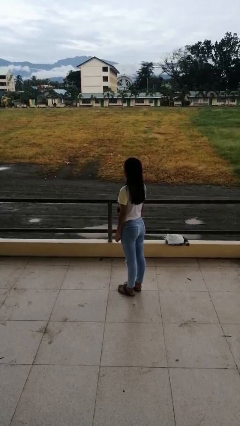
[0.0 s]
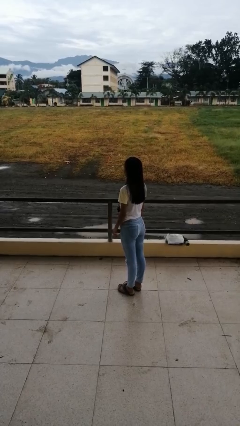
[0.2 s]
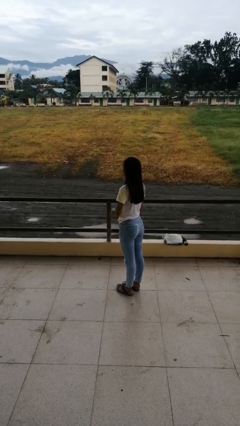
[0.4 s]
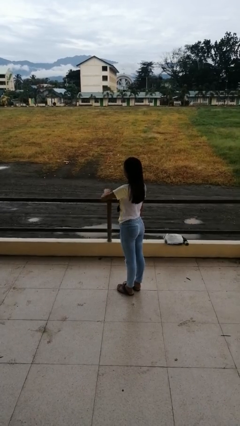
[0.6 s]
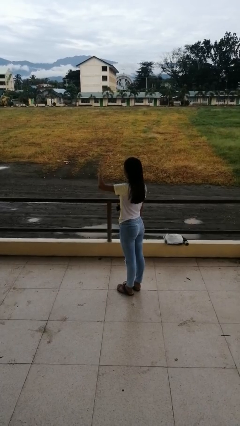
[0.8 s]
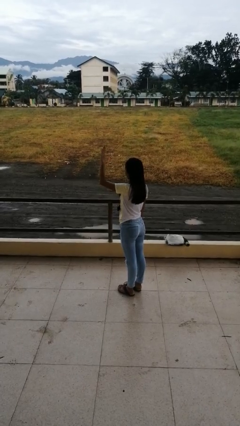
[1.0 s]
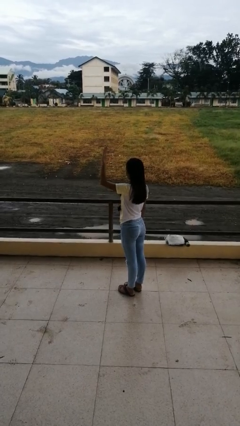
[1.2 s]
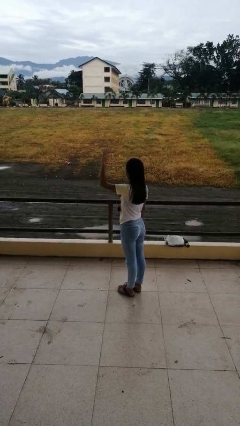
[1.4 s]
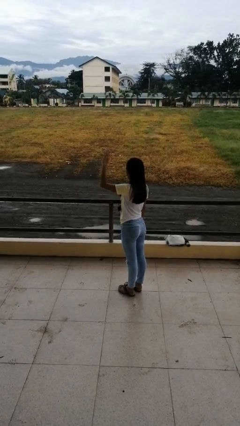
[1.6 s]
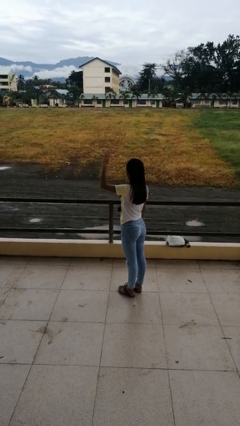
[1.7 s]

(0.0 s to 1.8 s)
person gestures swipe up

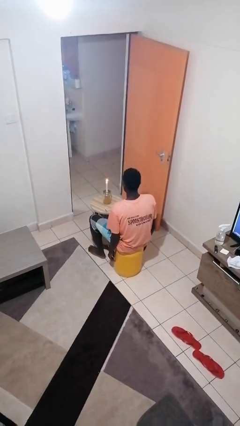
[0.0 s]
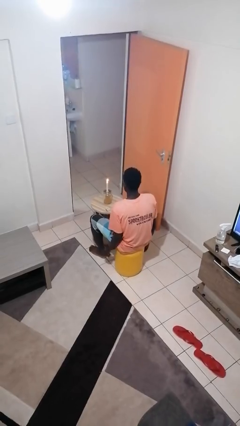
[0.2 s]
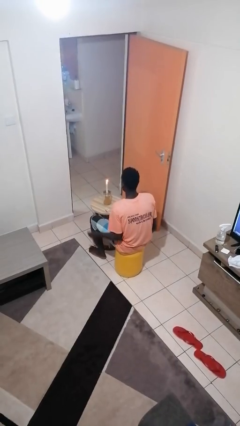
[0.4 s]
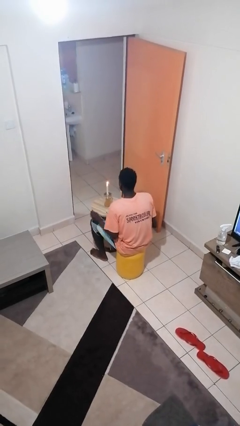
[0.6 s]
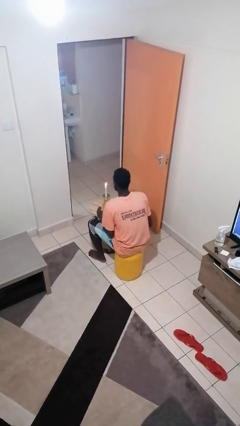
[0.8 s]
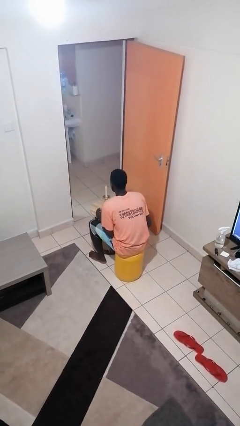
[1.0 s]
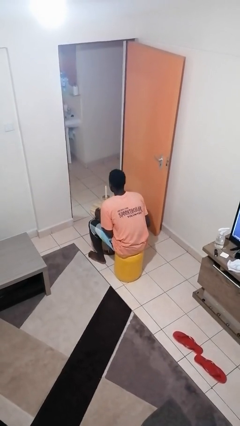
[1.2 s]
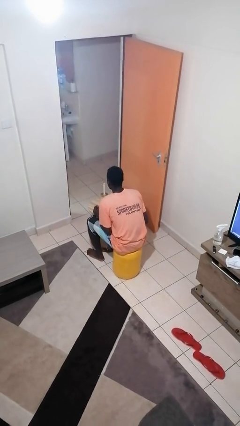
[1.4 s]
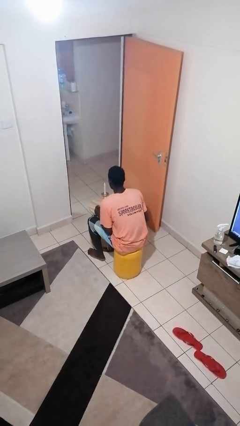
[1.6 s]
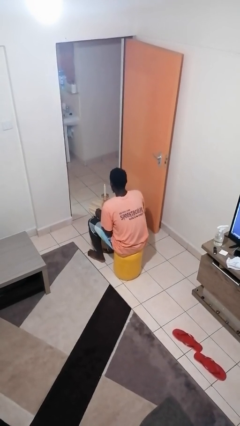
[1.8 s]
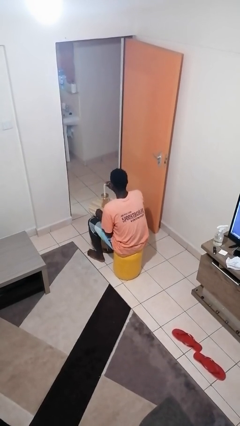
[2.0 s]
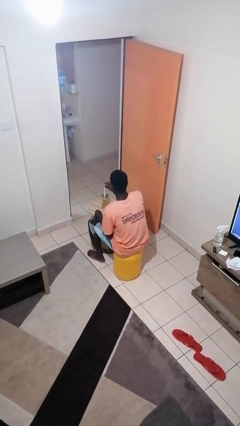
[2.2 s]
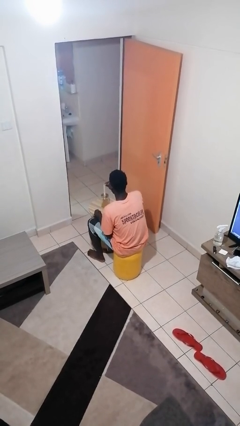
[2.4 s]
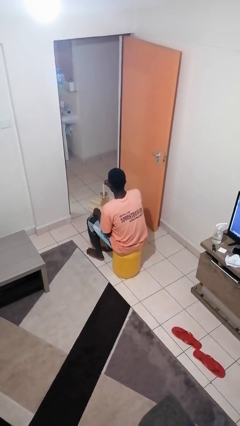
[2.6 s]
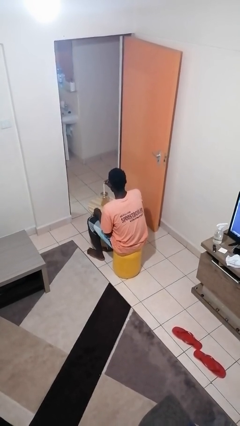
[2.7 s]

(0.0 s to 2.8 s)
person extinguishes candle

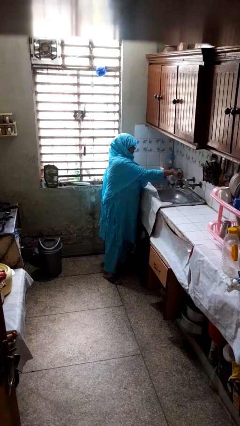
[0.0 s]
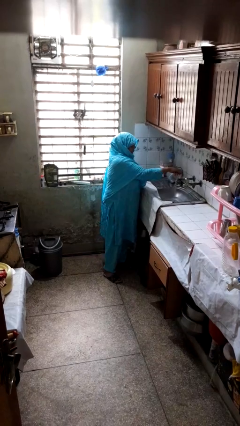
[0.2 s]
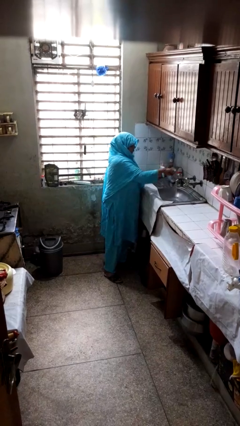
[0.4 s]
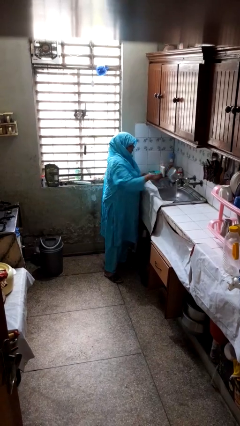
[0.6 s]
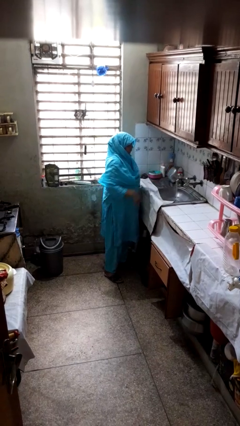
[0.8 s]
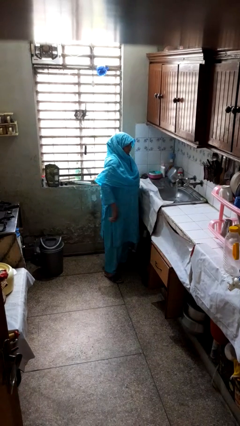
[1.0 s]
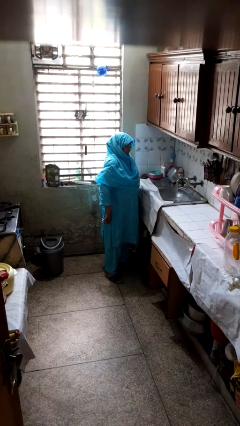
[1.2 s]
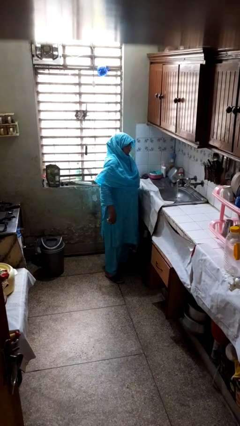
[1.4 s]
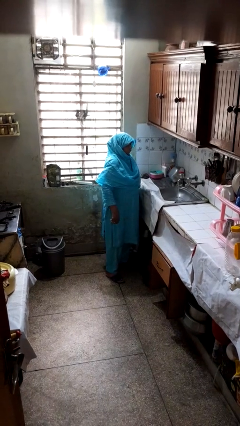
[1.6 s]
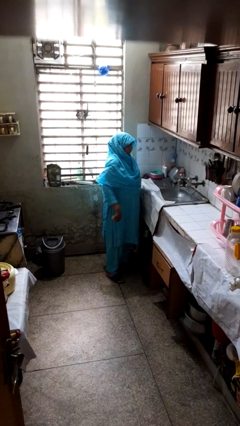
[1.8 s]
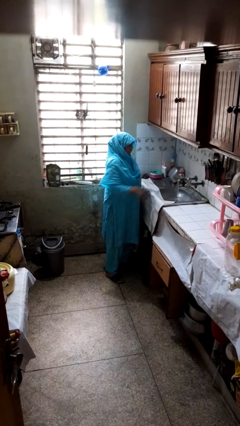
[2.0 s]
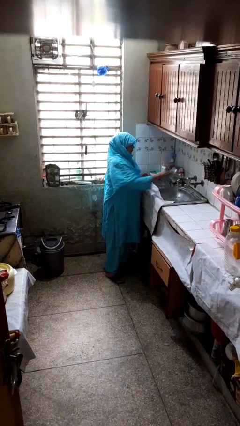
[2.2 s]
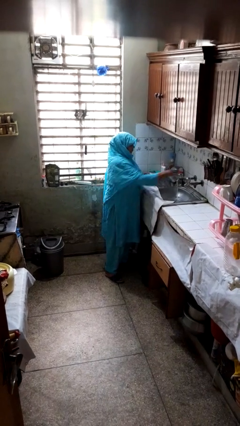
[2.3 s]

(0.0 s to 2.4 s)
person turns on faucet

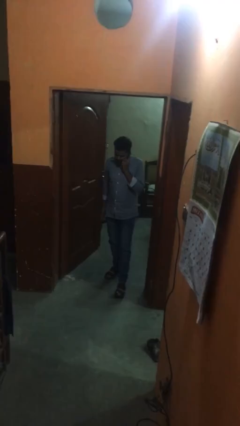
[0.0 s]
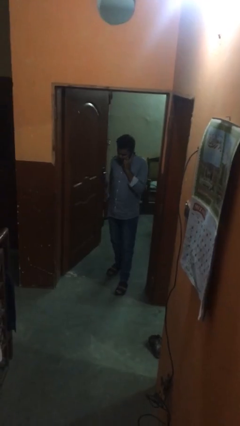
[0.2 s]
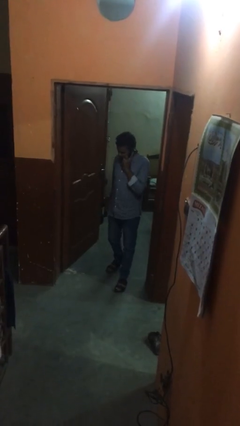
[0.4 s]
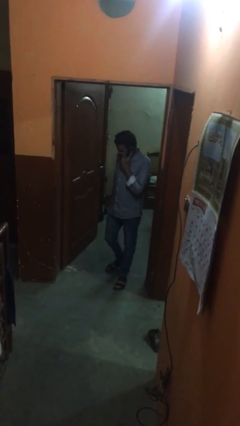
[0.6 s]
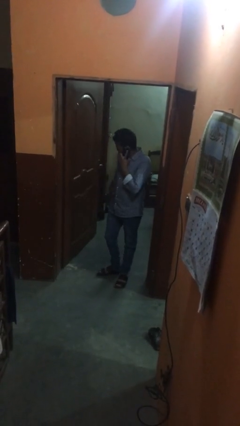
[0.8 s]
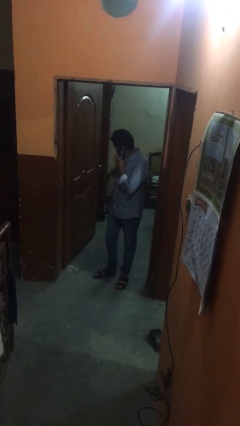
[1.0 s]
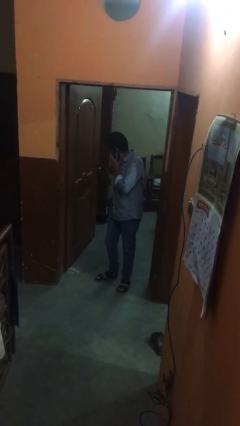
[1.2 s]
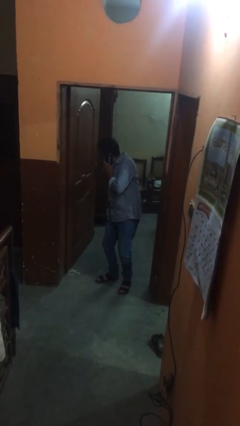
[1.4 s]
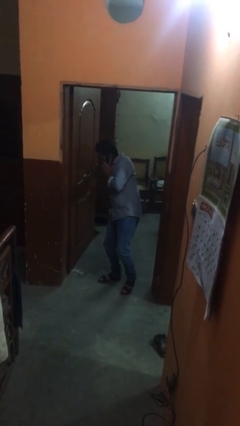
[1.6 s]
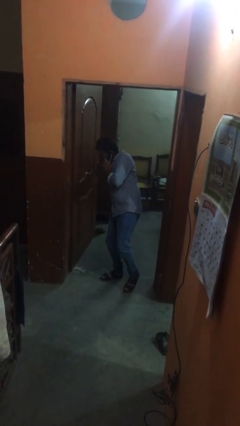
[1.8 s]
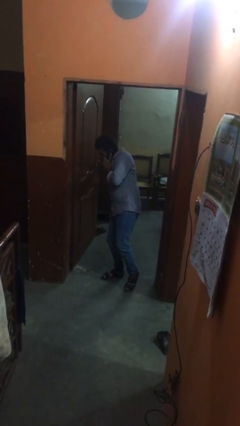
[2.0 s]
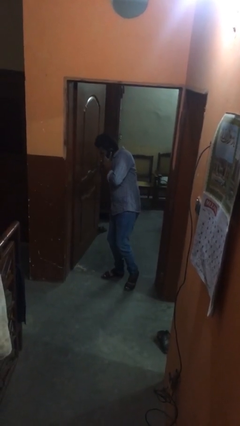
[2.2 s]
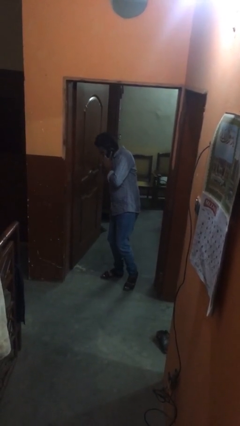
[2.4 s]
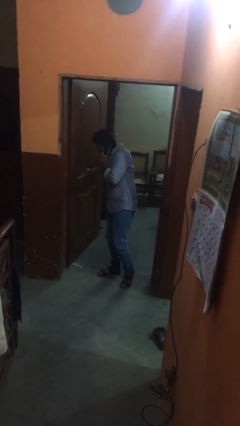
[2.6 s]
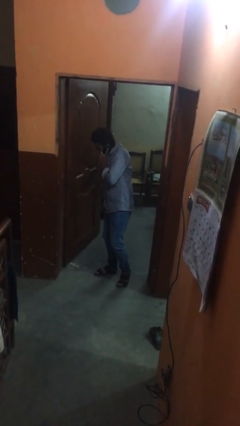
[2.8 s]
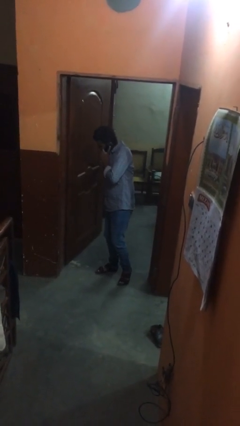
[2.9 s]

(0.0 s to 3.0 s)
person enters scene through structure

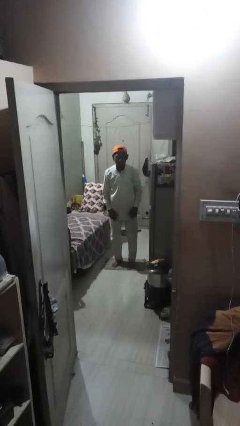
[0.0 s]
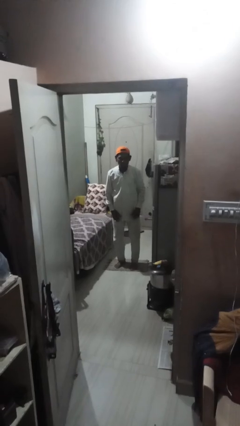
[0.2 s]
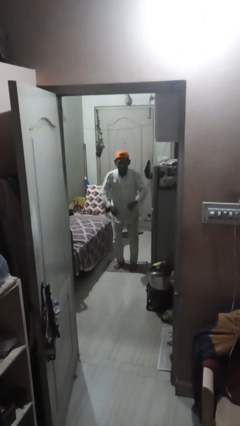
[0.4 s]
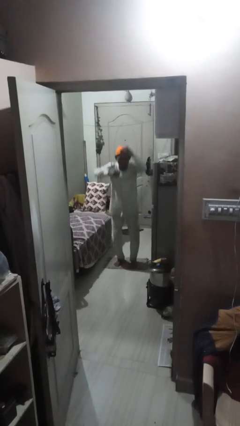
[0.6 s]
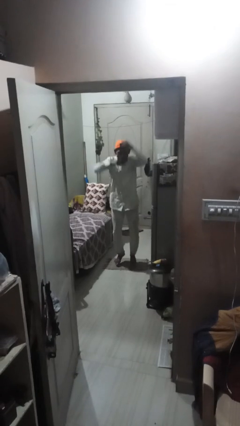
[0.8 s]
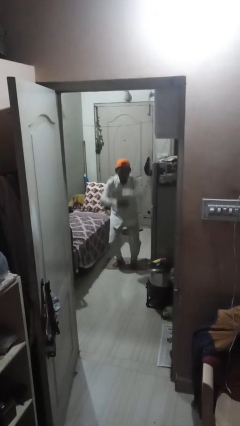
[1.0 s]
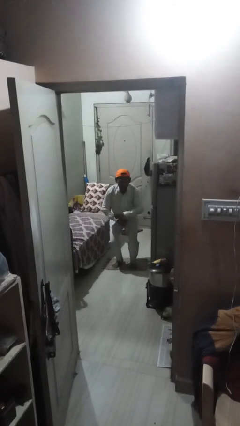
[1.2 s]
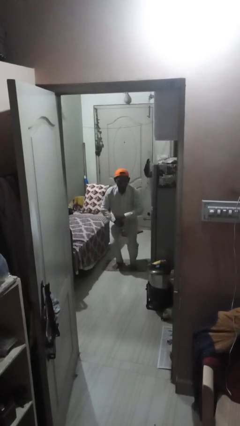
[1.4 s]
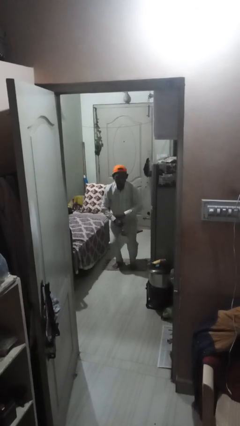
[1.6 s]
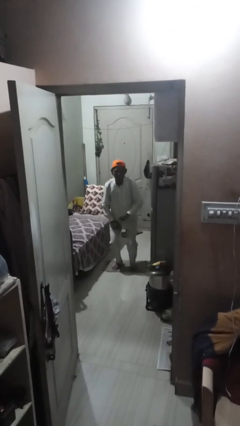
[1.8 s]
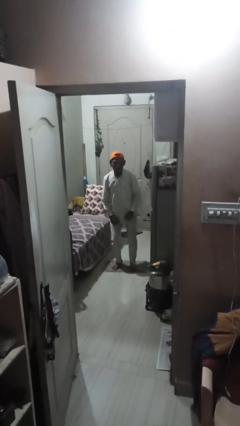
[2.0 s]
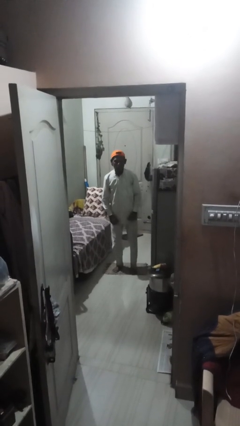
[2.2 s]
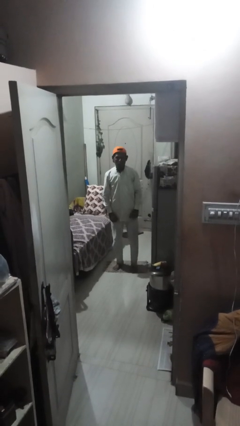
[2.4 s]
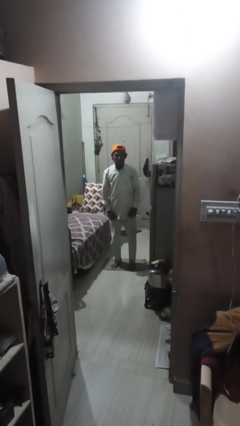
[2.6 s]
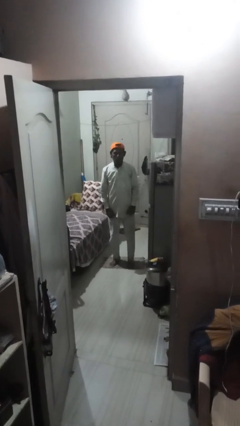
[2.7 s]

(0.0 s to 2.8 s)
person jumps

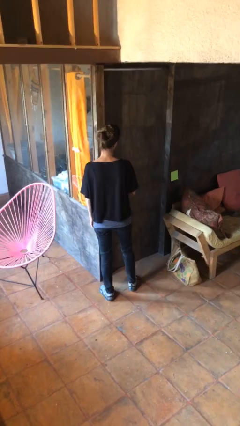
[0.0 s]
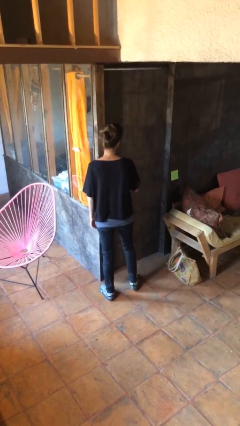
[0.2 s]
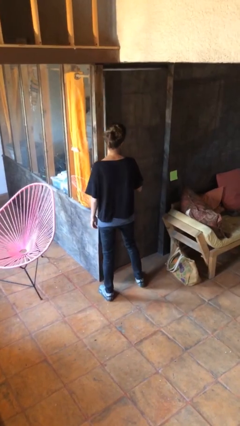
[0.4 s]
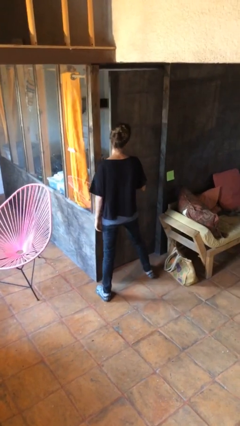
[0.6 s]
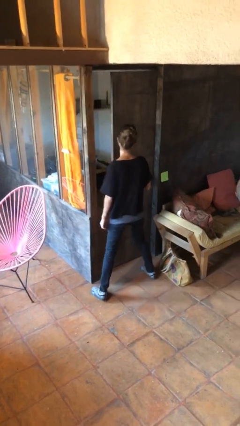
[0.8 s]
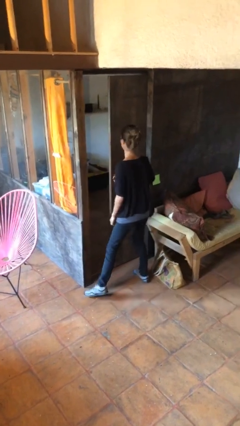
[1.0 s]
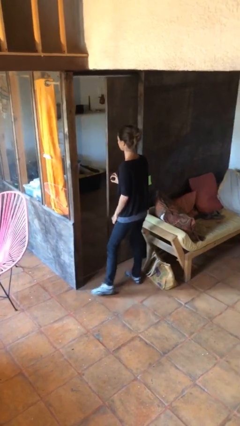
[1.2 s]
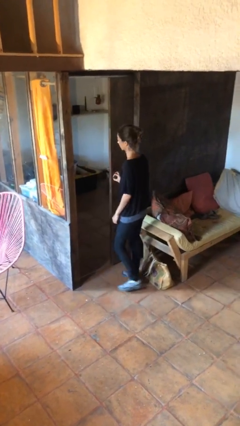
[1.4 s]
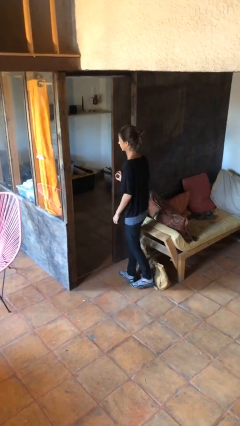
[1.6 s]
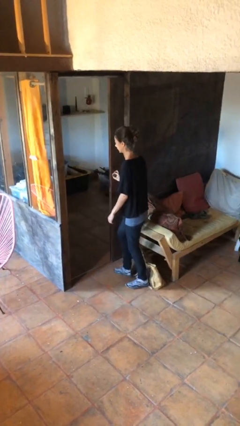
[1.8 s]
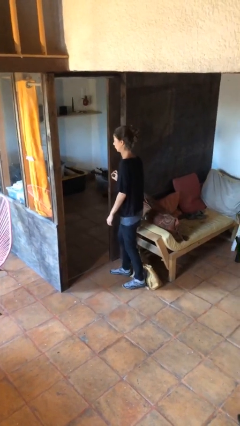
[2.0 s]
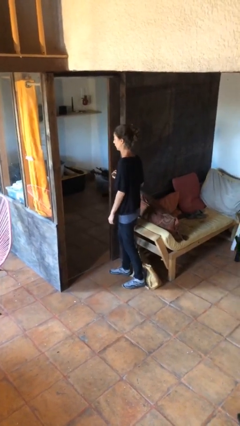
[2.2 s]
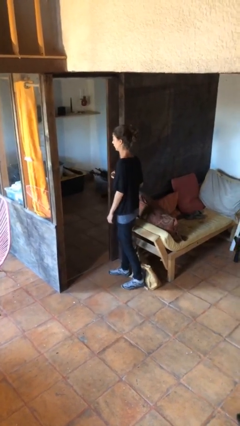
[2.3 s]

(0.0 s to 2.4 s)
person opens sliding door

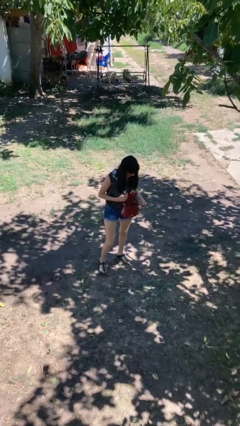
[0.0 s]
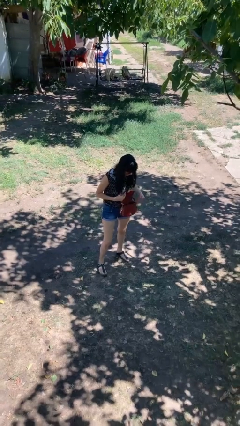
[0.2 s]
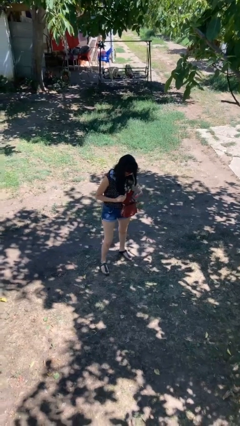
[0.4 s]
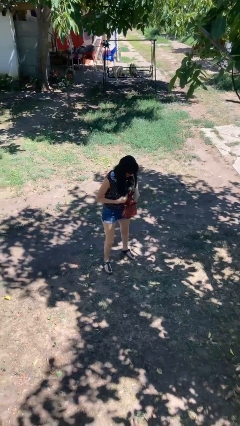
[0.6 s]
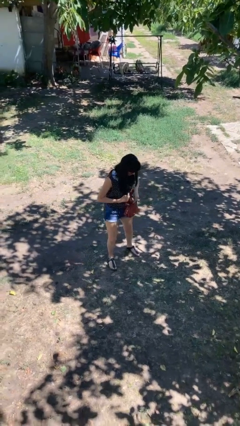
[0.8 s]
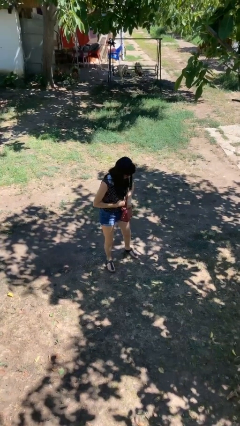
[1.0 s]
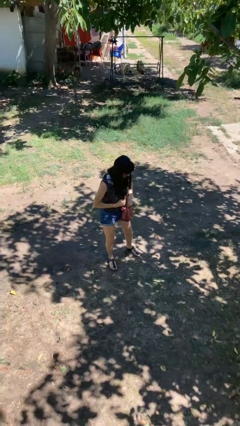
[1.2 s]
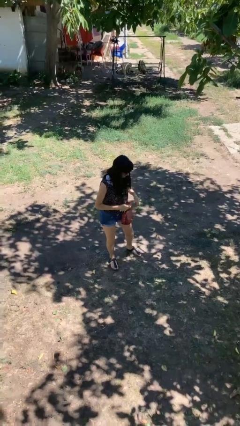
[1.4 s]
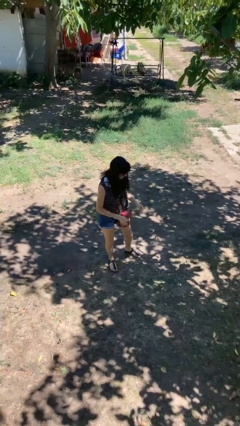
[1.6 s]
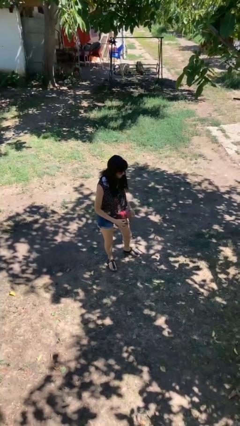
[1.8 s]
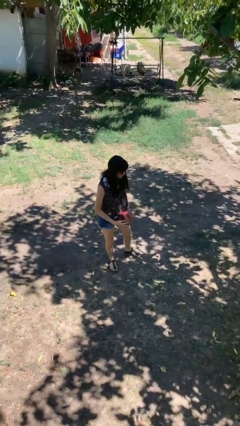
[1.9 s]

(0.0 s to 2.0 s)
person puts object into purse

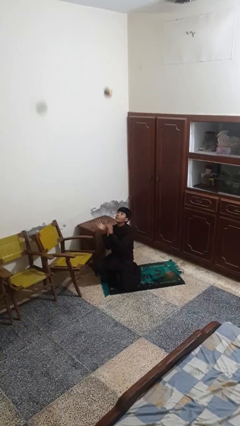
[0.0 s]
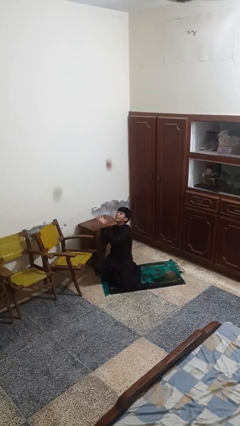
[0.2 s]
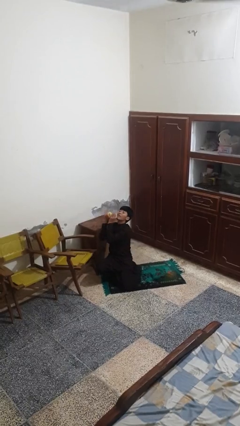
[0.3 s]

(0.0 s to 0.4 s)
person catches dropped object
